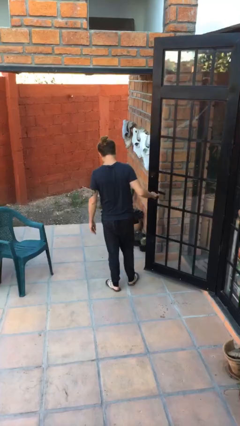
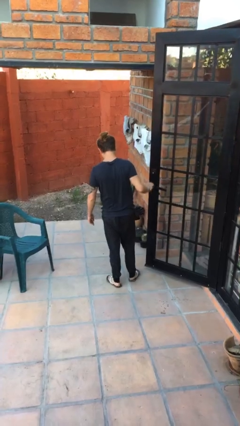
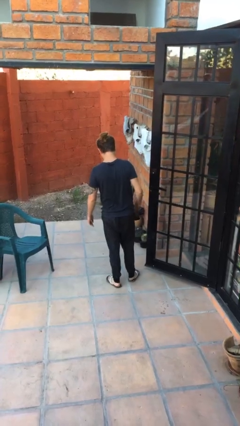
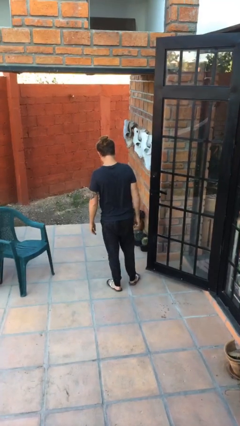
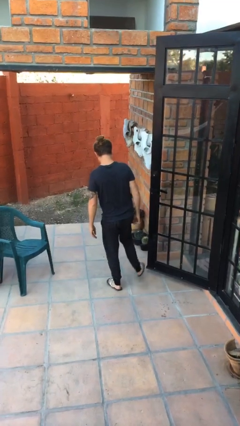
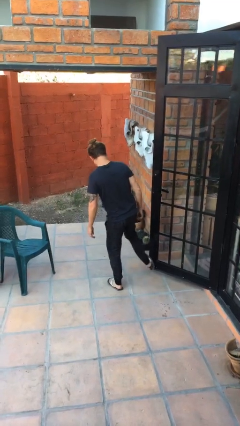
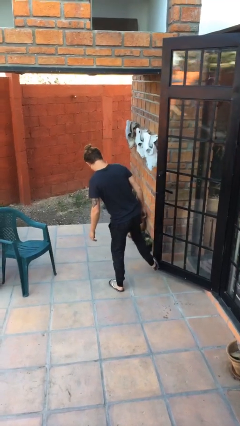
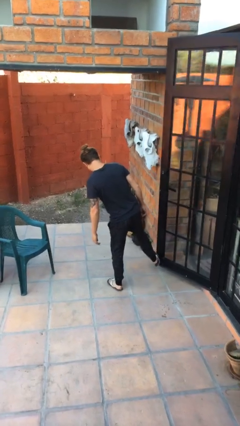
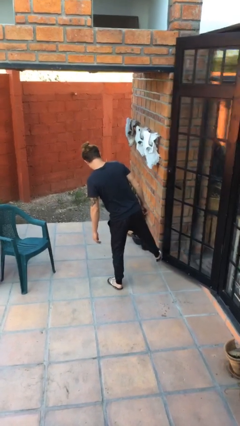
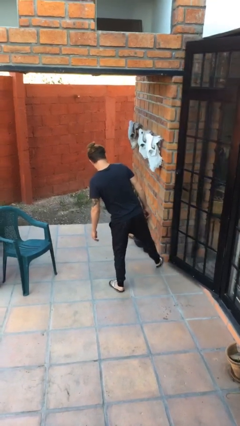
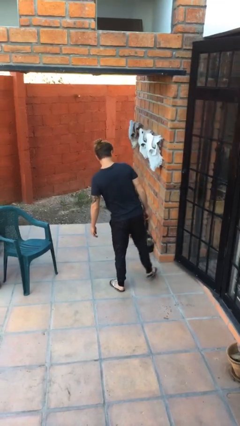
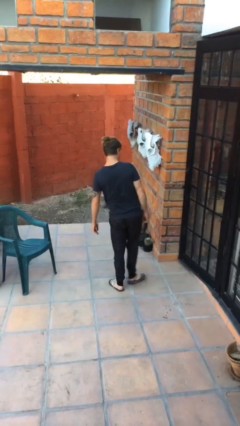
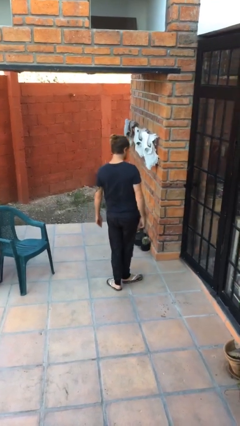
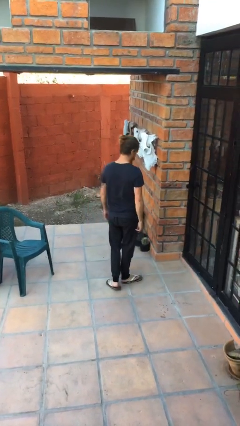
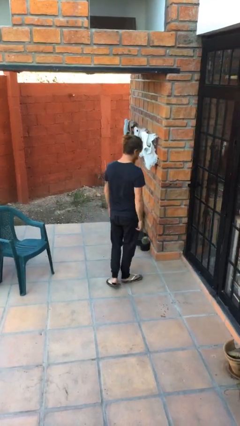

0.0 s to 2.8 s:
person closes door with foot

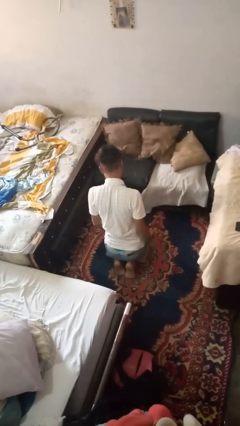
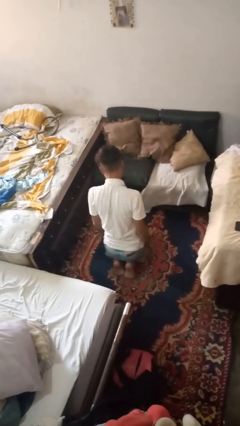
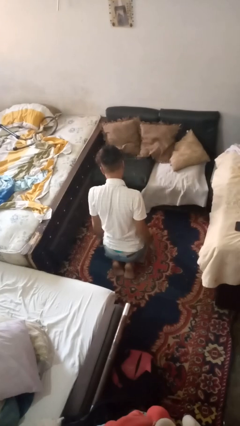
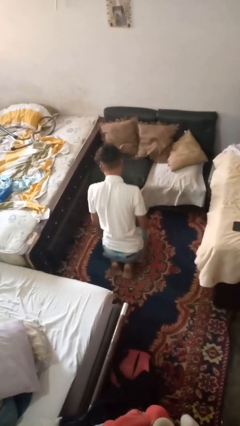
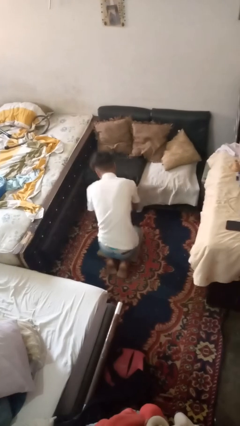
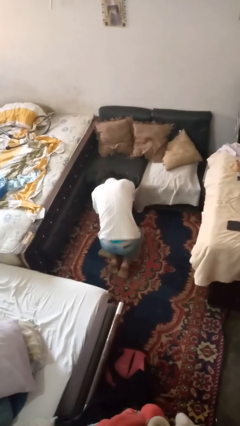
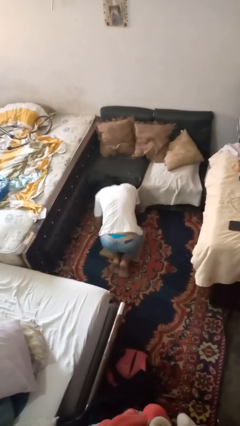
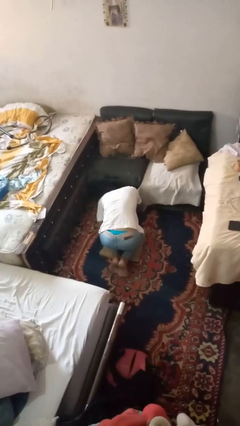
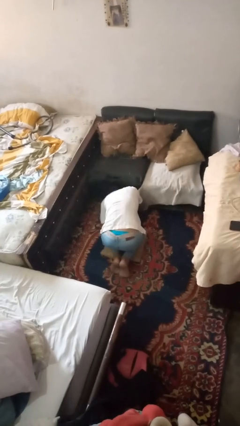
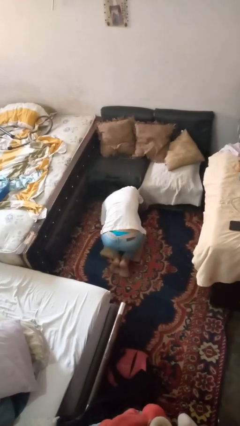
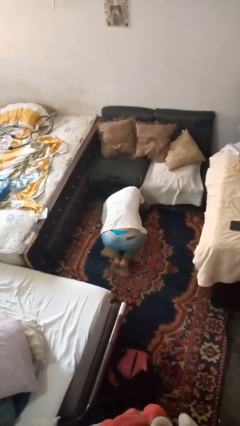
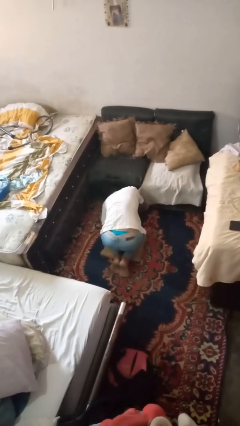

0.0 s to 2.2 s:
person searches under couch

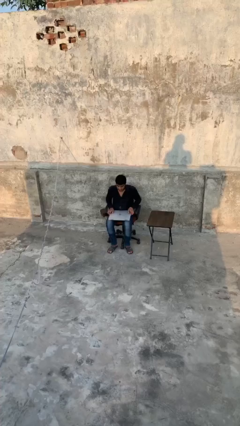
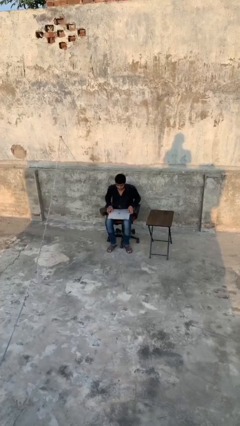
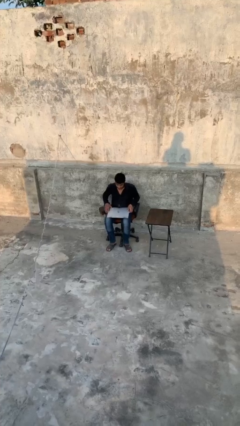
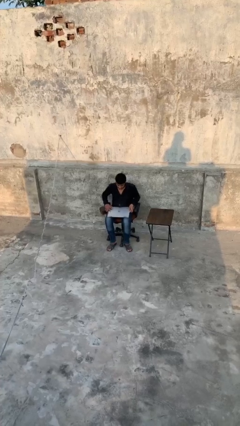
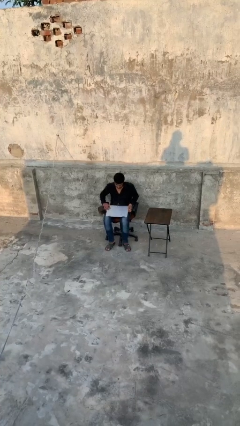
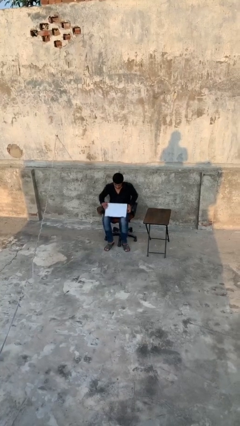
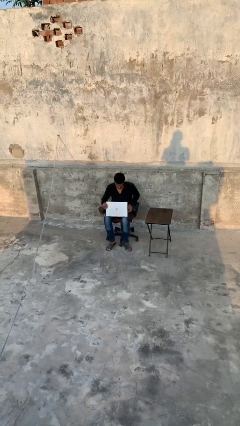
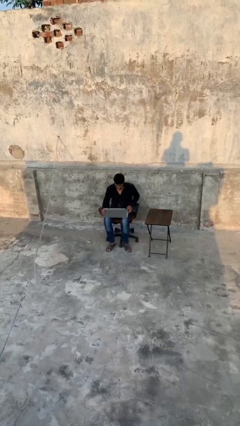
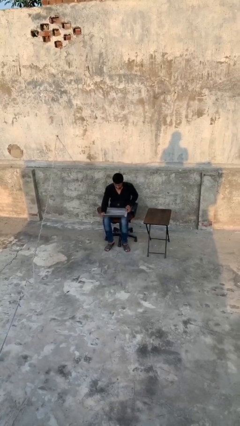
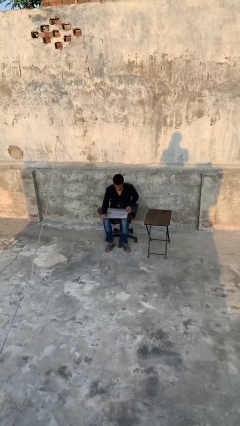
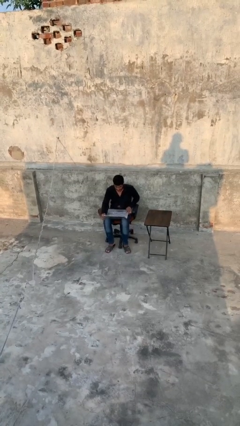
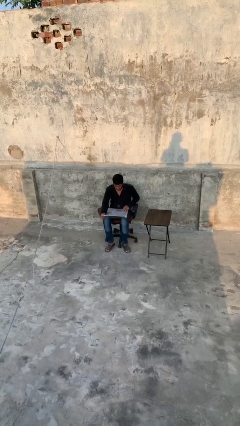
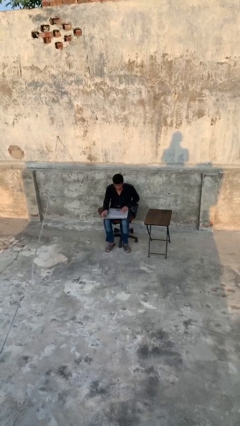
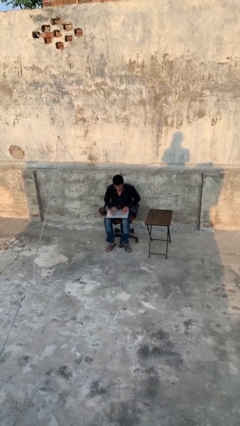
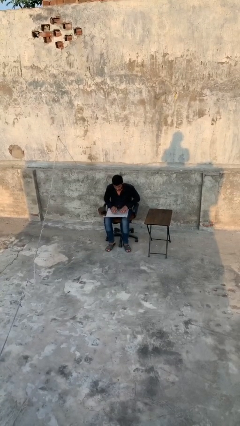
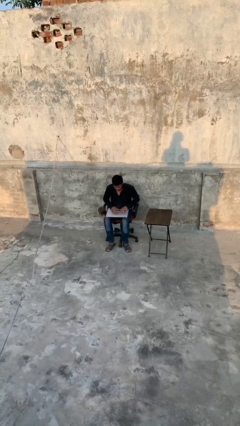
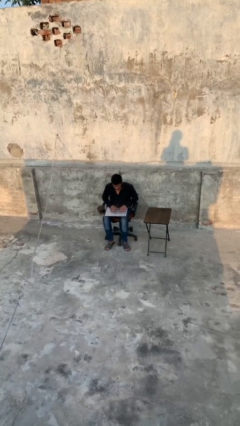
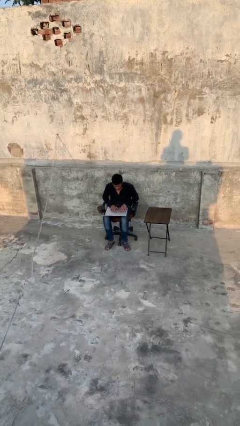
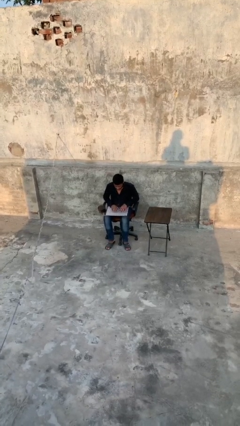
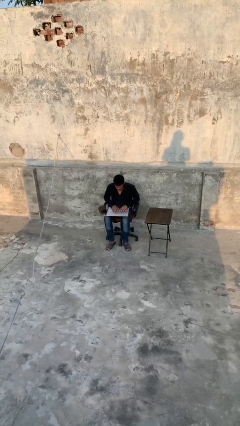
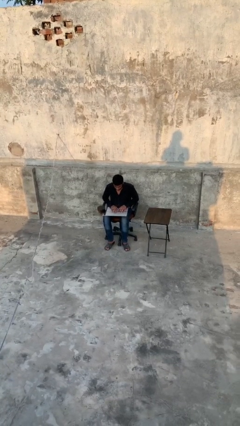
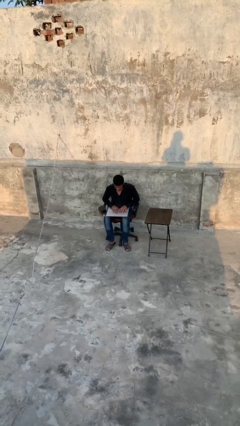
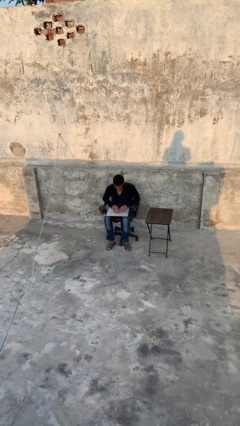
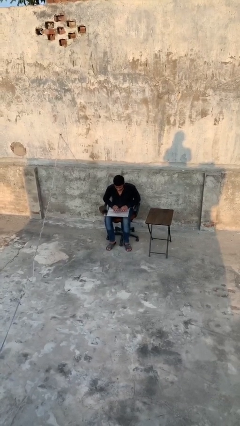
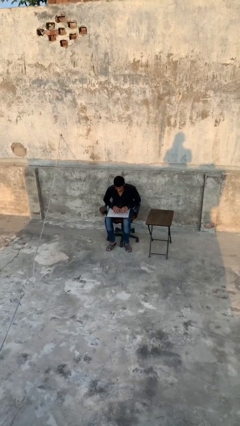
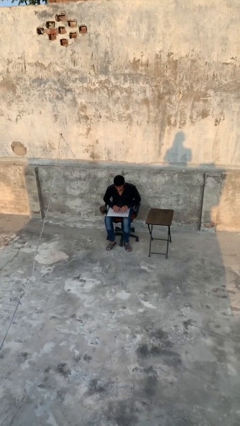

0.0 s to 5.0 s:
person interacts with laptop

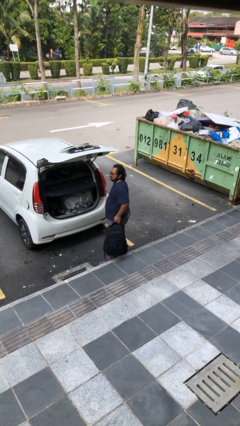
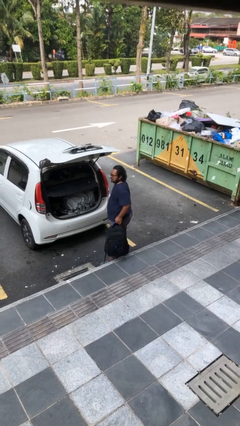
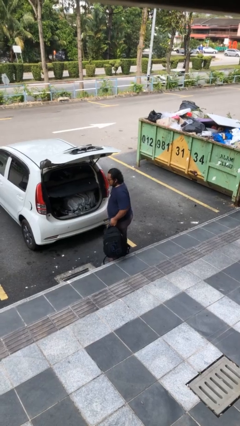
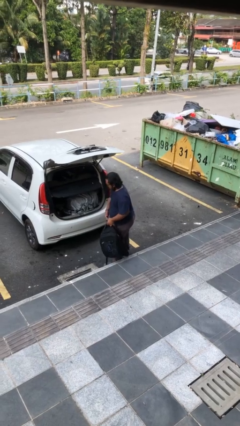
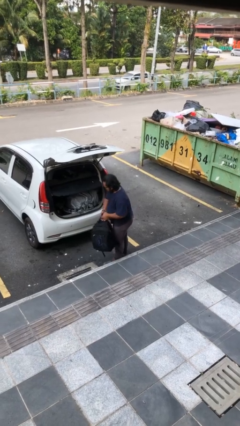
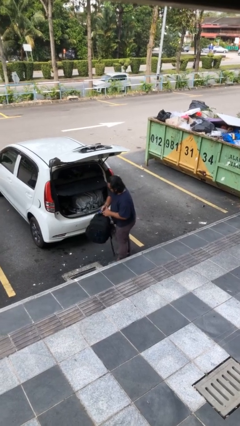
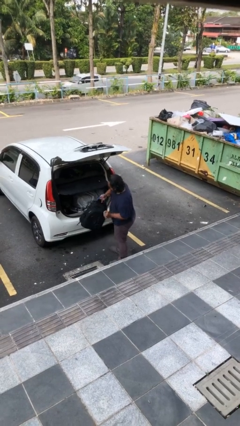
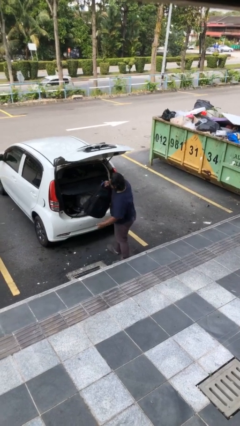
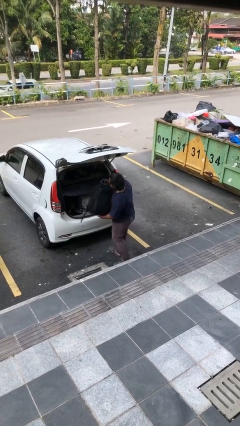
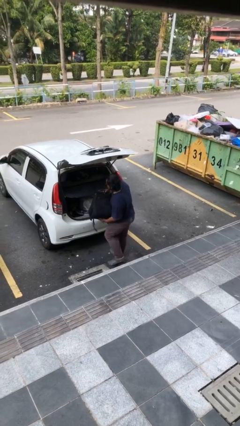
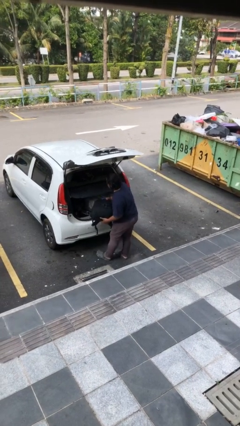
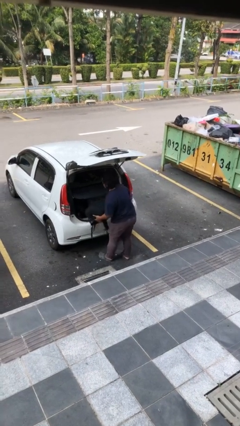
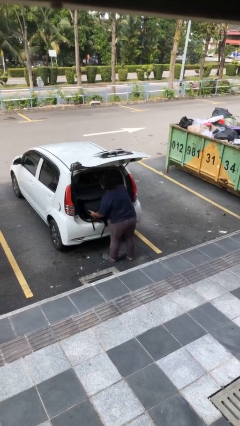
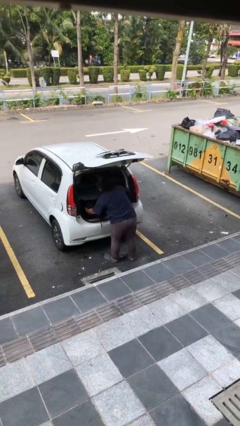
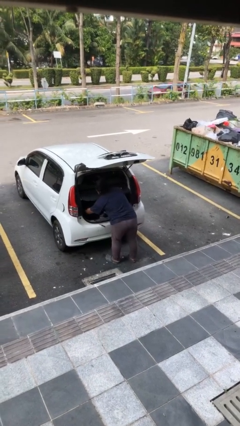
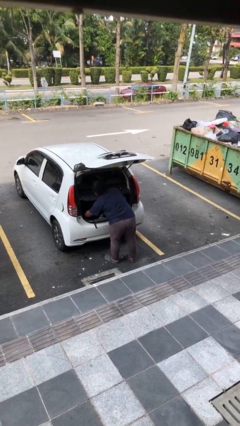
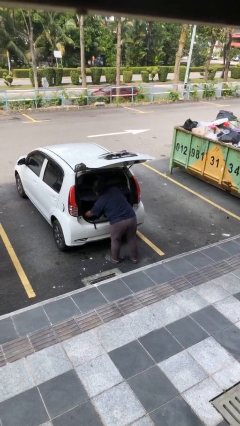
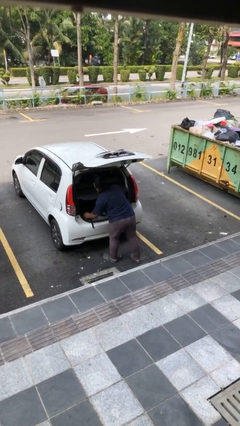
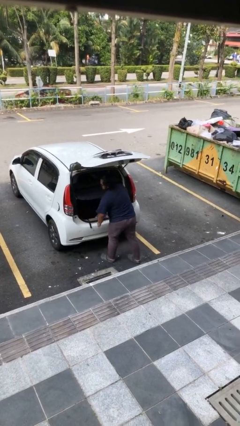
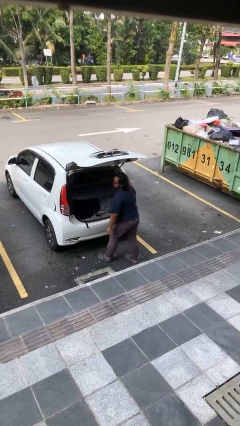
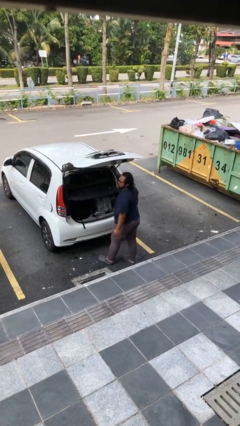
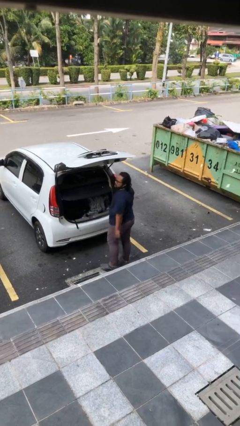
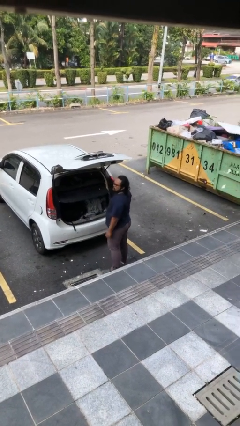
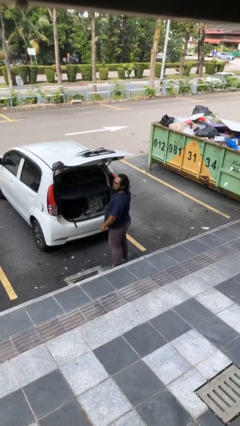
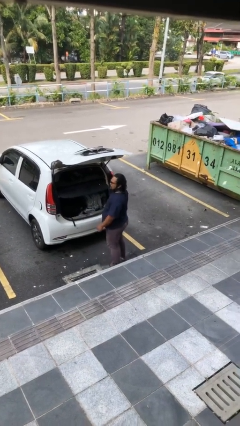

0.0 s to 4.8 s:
person loads car

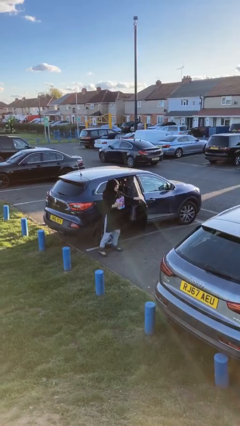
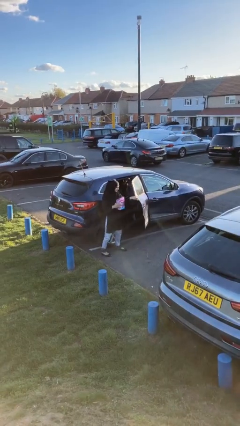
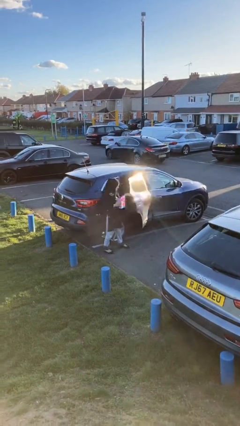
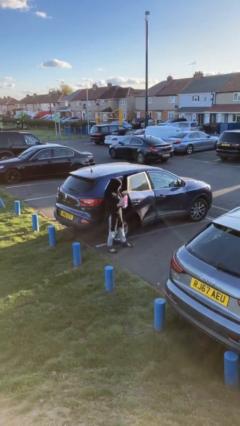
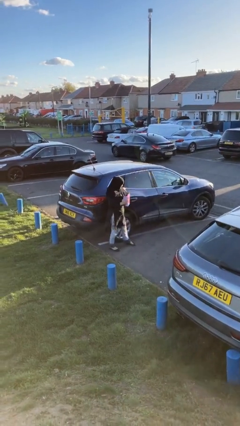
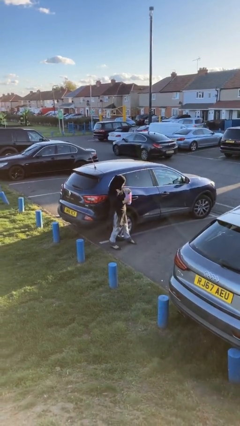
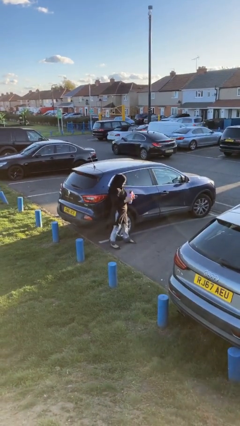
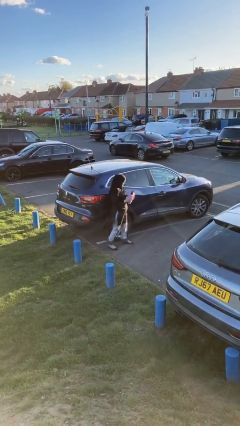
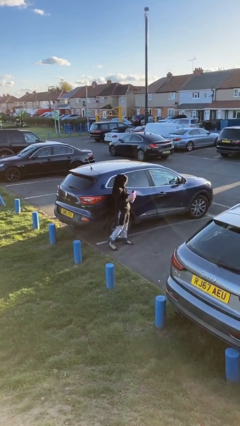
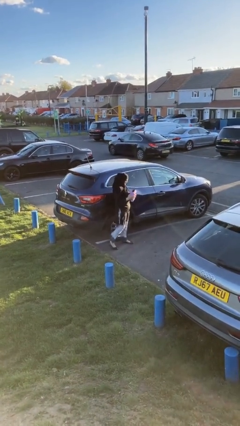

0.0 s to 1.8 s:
person closes car door

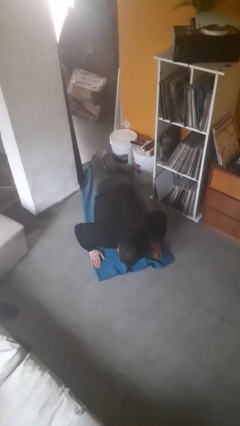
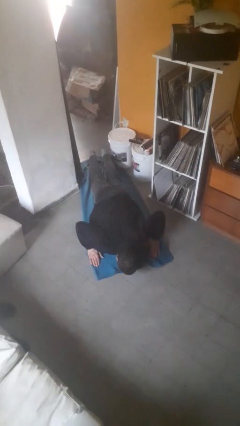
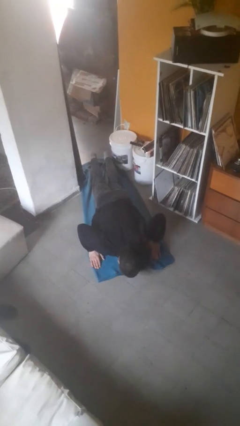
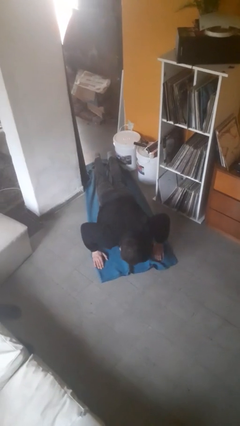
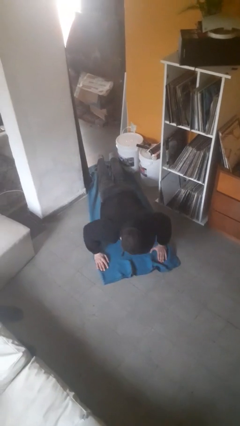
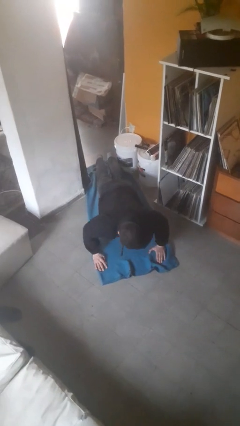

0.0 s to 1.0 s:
person exercises with pushup
